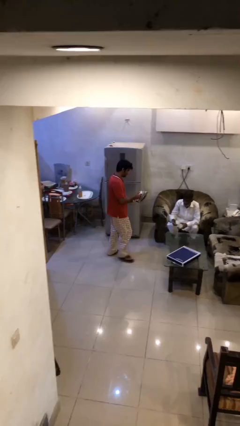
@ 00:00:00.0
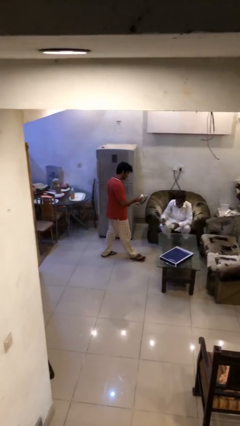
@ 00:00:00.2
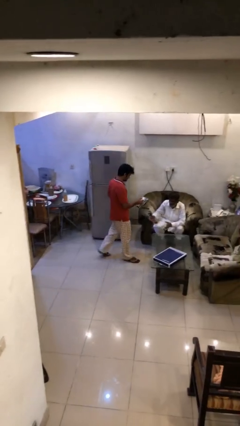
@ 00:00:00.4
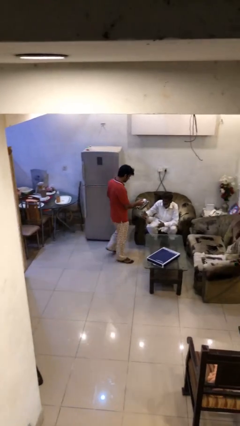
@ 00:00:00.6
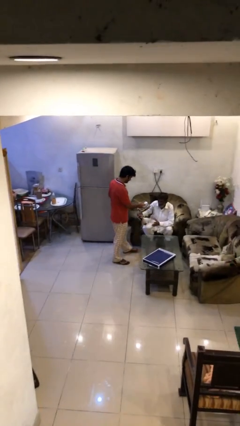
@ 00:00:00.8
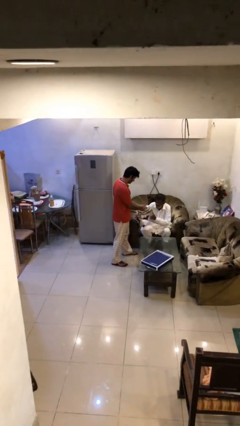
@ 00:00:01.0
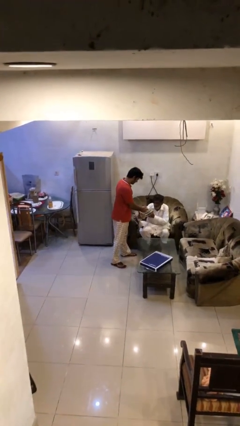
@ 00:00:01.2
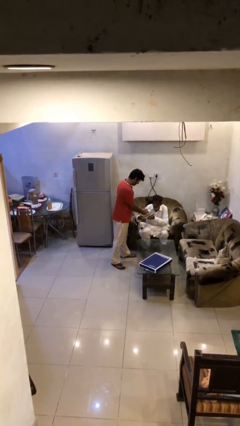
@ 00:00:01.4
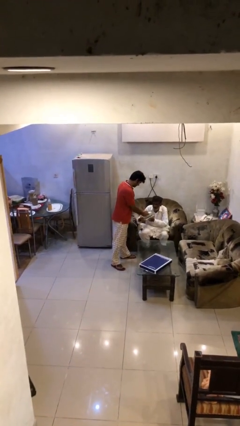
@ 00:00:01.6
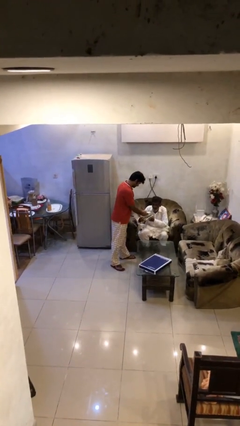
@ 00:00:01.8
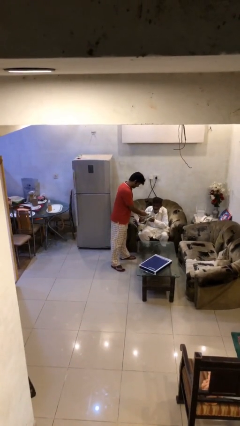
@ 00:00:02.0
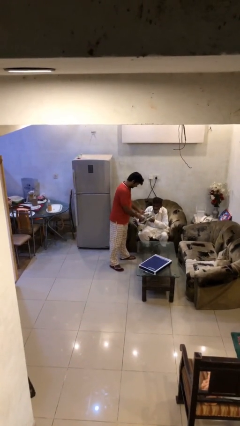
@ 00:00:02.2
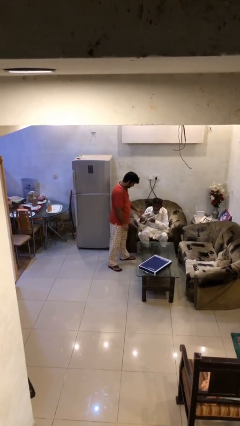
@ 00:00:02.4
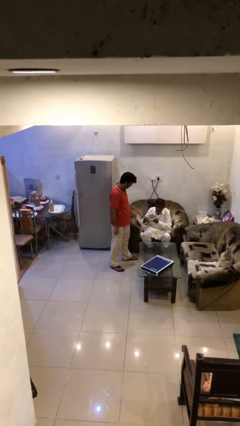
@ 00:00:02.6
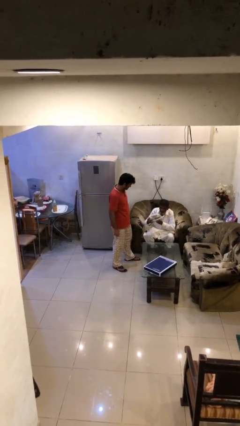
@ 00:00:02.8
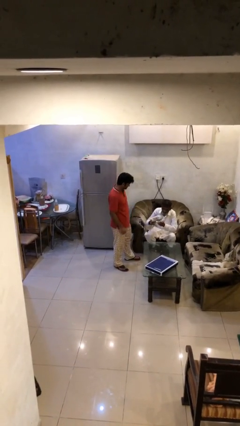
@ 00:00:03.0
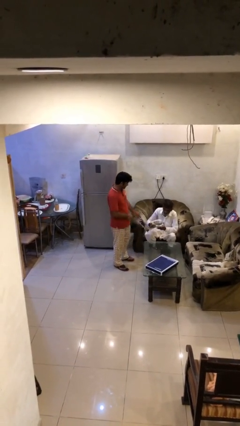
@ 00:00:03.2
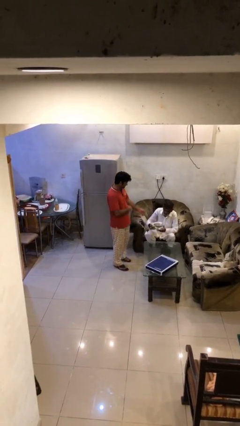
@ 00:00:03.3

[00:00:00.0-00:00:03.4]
person transfers object to person

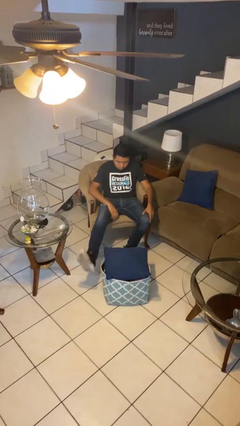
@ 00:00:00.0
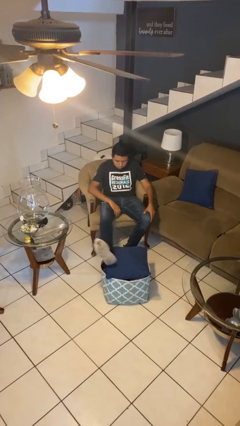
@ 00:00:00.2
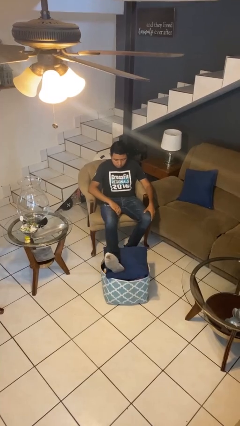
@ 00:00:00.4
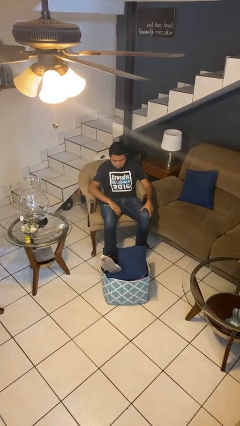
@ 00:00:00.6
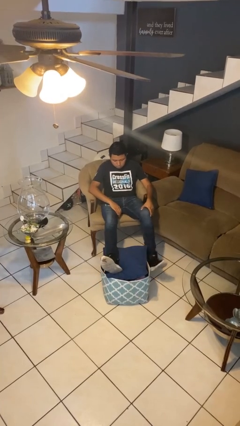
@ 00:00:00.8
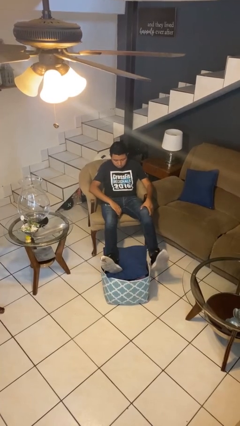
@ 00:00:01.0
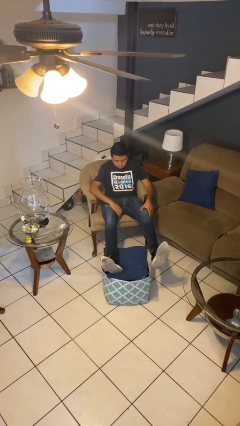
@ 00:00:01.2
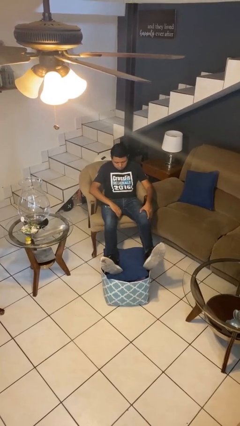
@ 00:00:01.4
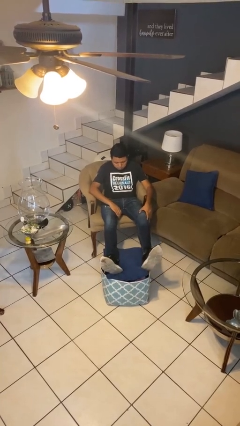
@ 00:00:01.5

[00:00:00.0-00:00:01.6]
person puts feet up

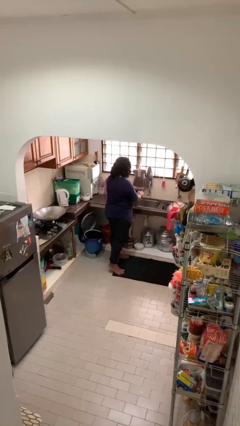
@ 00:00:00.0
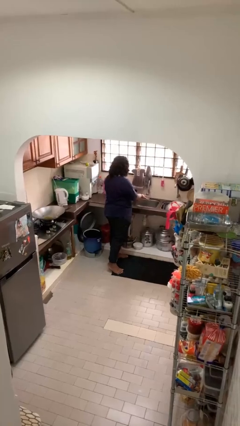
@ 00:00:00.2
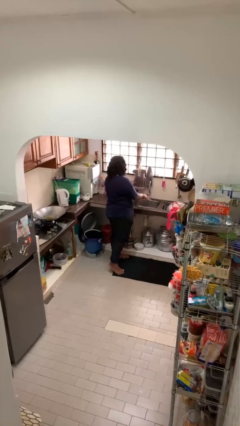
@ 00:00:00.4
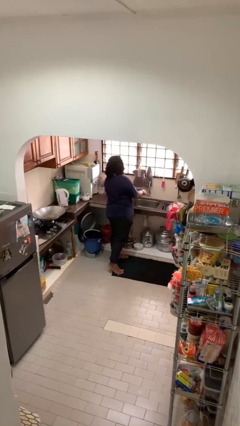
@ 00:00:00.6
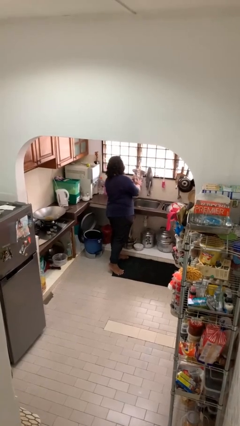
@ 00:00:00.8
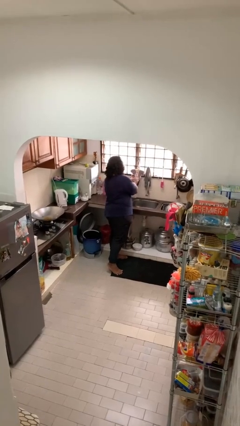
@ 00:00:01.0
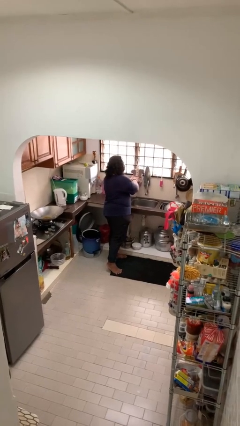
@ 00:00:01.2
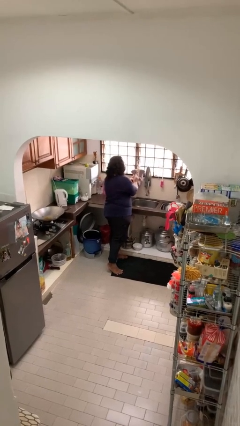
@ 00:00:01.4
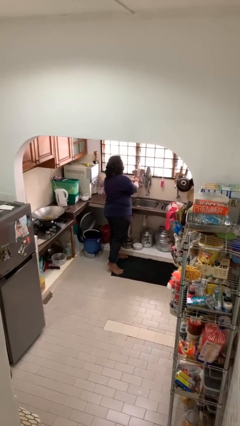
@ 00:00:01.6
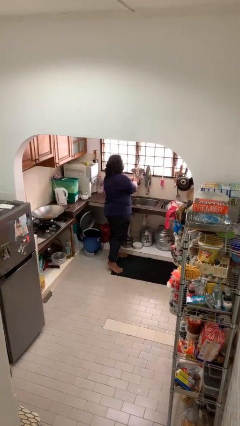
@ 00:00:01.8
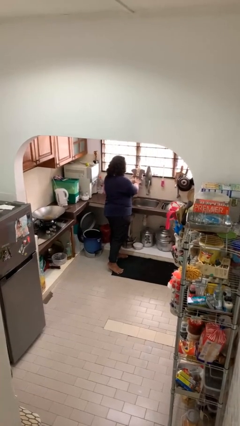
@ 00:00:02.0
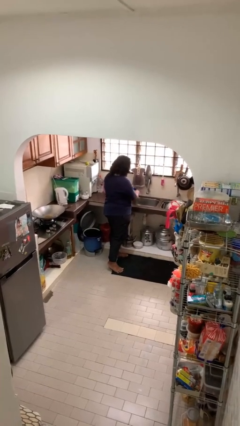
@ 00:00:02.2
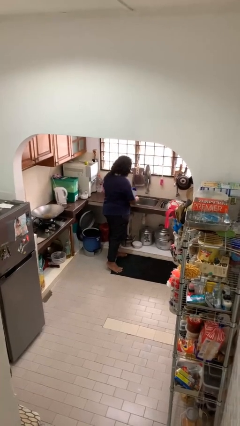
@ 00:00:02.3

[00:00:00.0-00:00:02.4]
person dries hands with towel

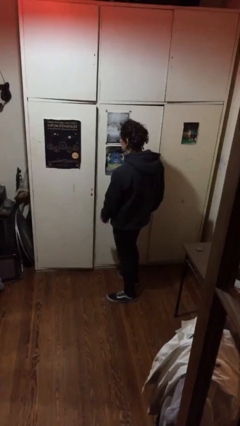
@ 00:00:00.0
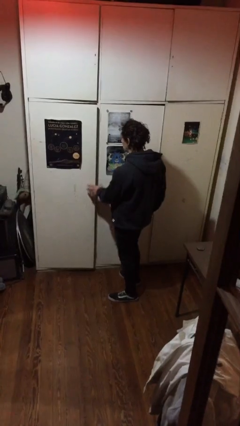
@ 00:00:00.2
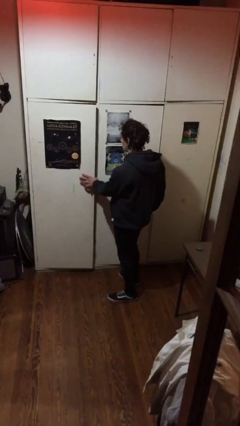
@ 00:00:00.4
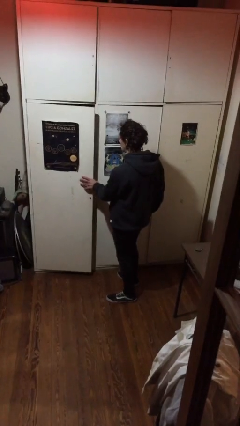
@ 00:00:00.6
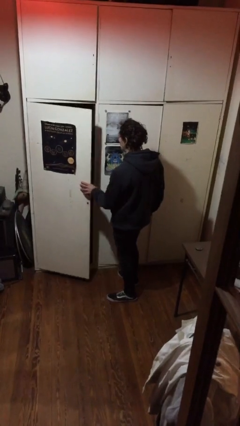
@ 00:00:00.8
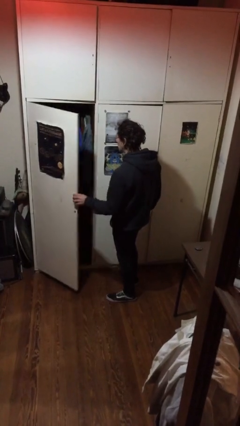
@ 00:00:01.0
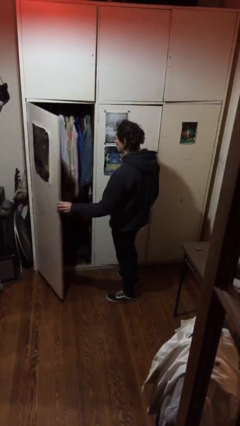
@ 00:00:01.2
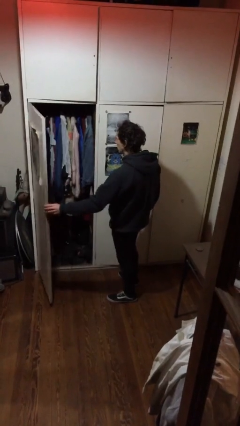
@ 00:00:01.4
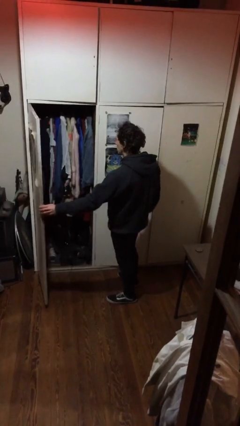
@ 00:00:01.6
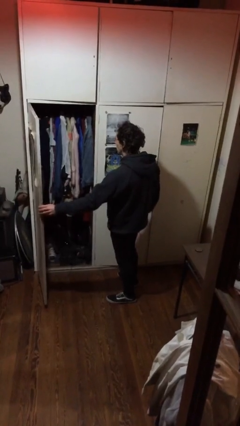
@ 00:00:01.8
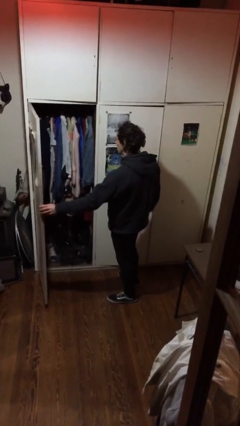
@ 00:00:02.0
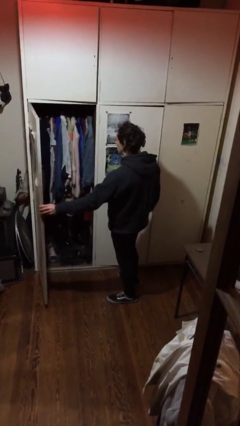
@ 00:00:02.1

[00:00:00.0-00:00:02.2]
person opens closet door

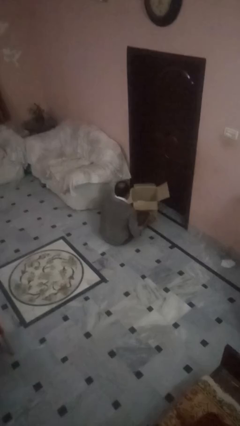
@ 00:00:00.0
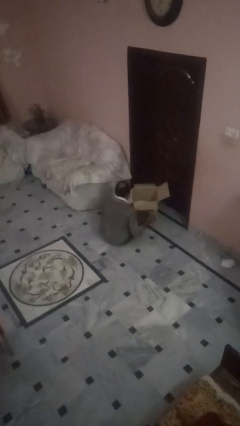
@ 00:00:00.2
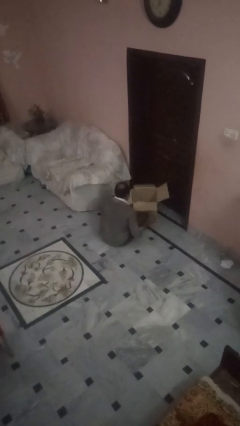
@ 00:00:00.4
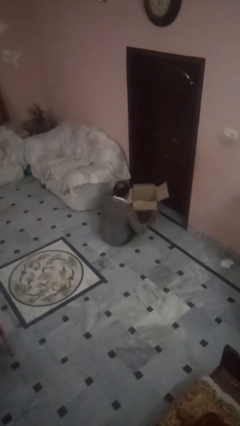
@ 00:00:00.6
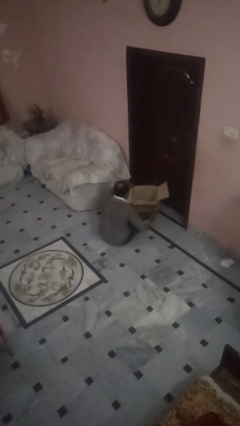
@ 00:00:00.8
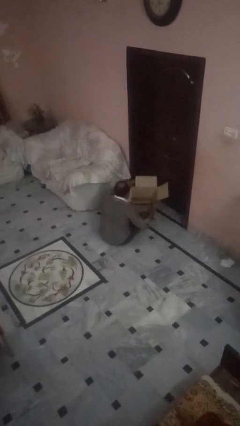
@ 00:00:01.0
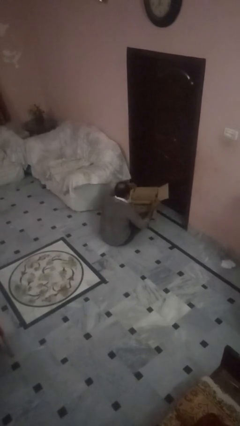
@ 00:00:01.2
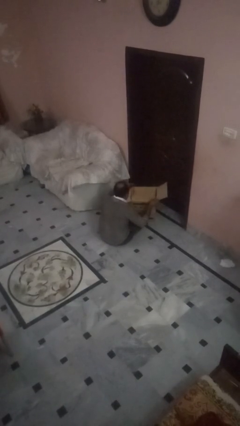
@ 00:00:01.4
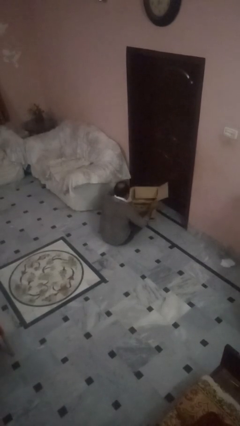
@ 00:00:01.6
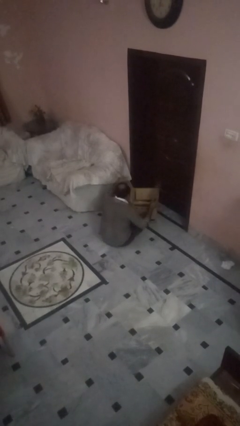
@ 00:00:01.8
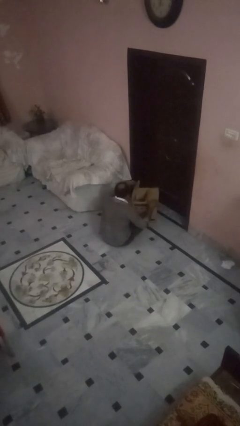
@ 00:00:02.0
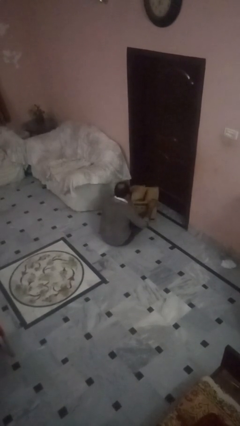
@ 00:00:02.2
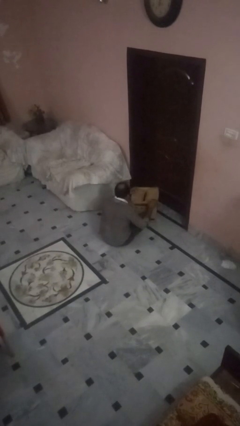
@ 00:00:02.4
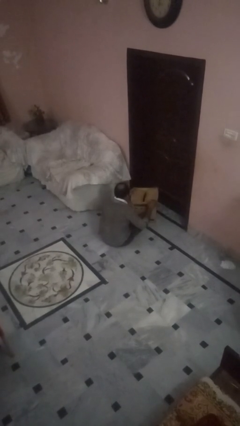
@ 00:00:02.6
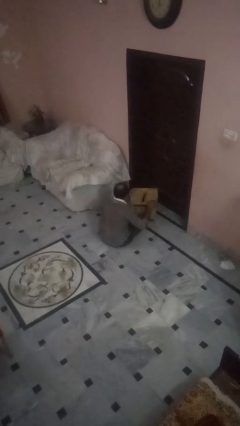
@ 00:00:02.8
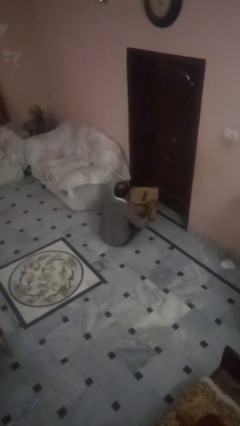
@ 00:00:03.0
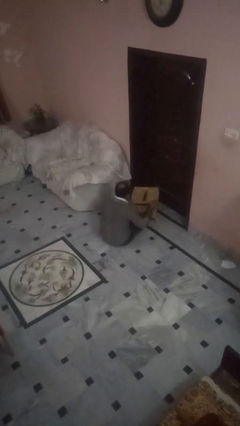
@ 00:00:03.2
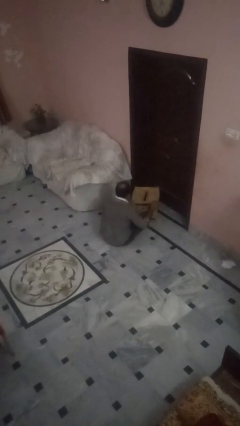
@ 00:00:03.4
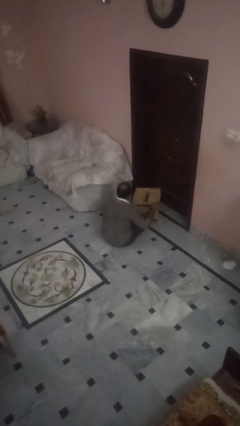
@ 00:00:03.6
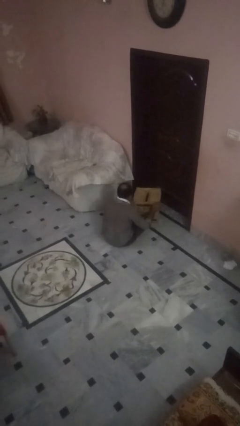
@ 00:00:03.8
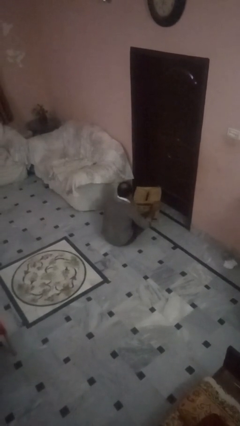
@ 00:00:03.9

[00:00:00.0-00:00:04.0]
person closes box

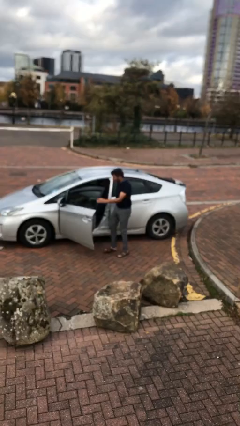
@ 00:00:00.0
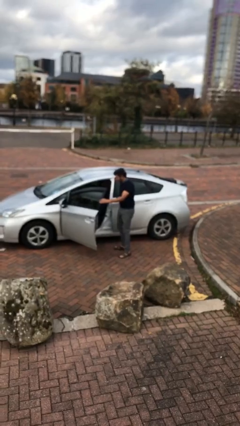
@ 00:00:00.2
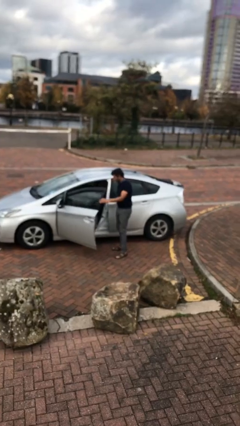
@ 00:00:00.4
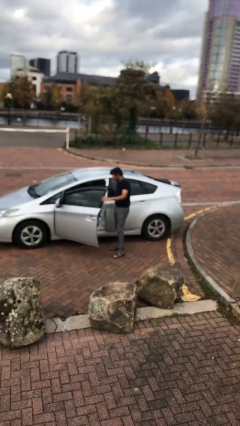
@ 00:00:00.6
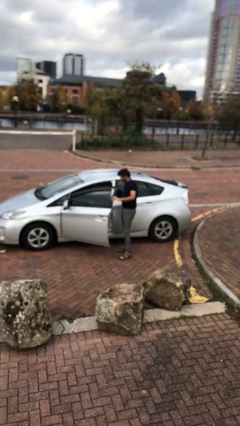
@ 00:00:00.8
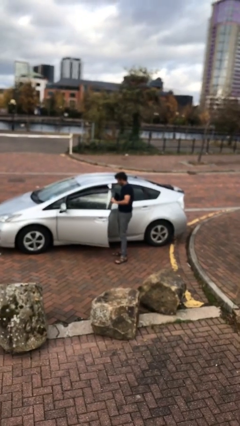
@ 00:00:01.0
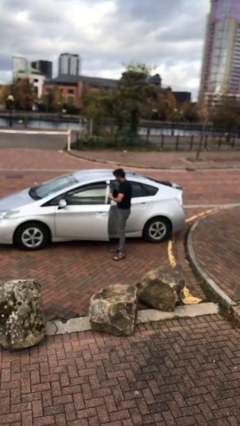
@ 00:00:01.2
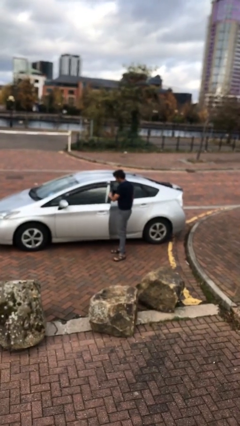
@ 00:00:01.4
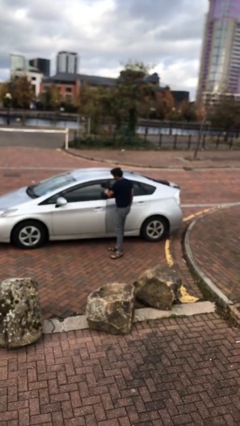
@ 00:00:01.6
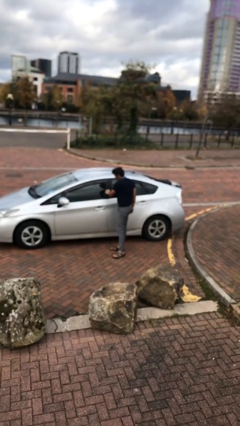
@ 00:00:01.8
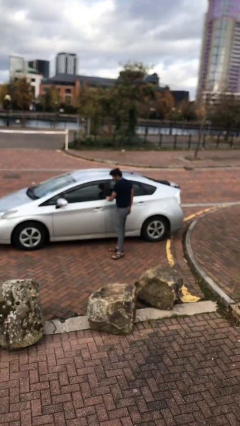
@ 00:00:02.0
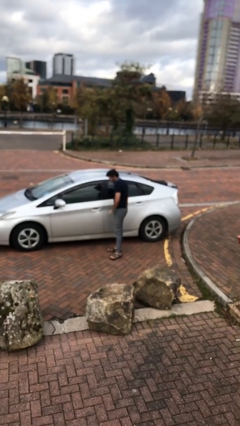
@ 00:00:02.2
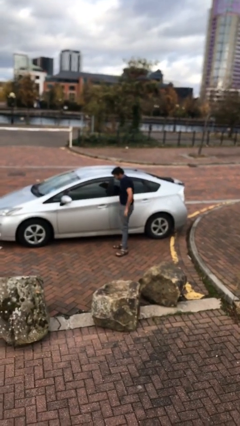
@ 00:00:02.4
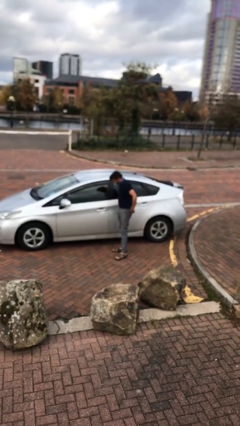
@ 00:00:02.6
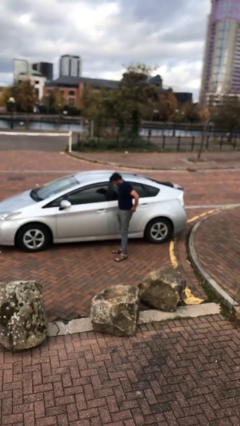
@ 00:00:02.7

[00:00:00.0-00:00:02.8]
person closes car door

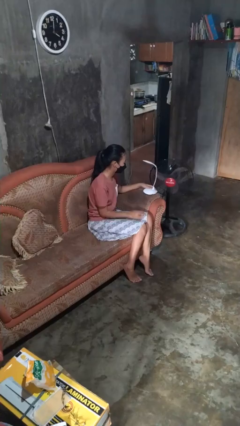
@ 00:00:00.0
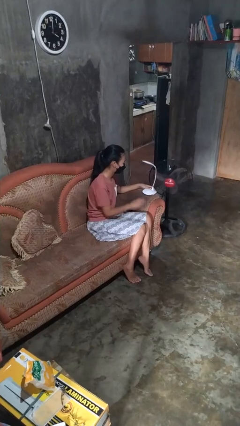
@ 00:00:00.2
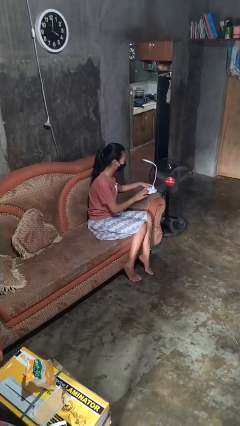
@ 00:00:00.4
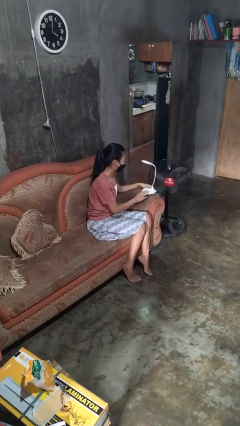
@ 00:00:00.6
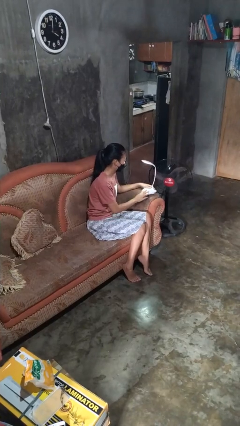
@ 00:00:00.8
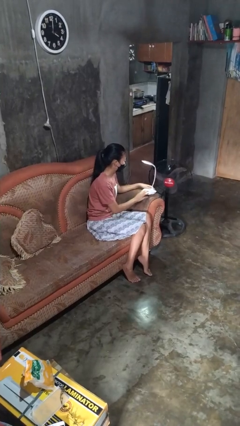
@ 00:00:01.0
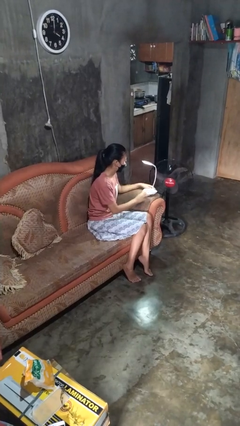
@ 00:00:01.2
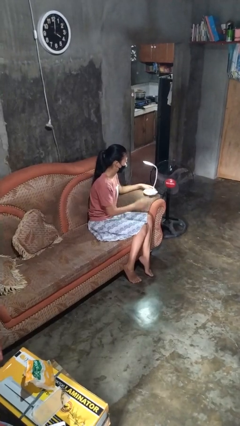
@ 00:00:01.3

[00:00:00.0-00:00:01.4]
person turns on lamp
